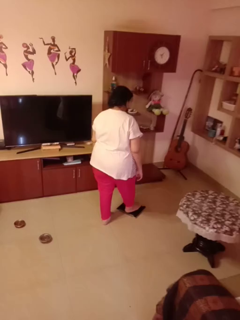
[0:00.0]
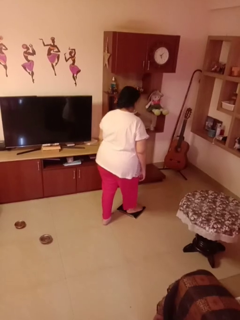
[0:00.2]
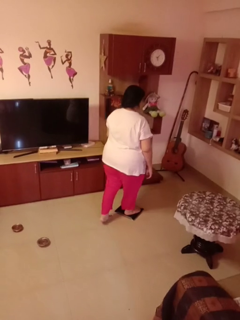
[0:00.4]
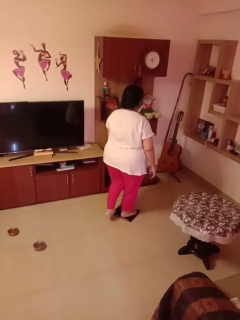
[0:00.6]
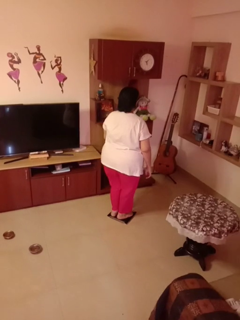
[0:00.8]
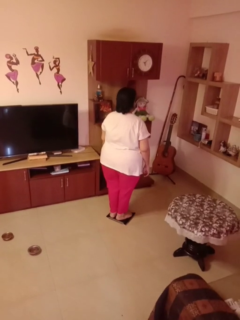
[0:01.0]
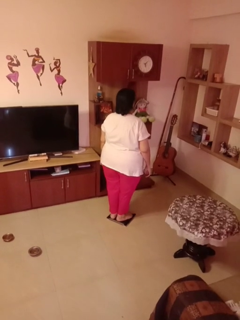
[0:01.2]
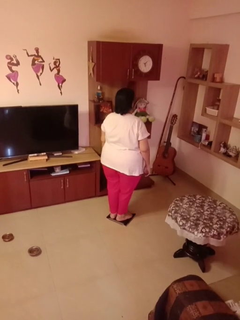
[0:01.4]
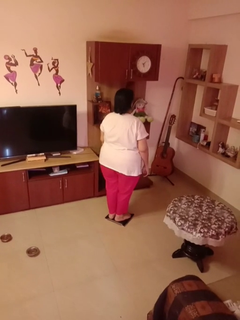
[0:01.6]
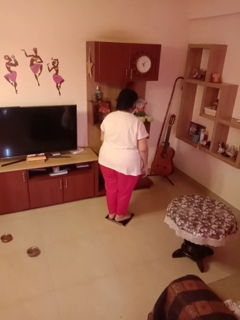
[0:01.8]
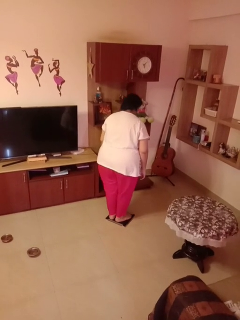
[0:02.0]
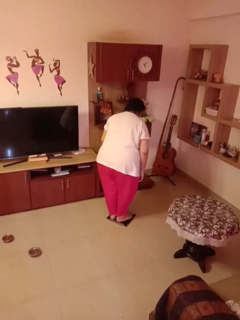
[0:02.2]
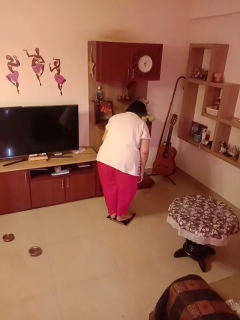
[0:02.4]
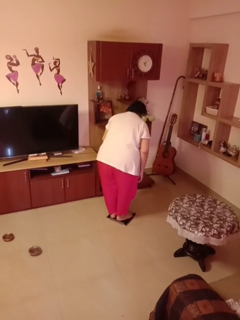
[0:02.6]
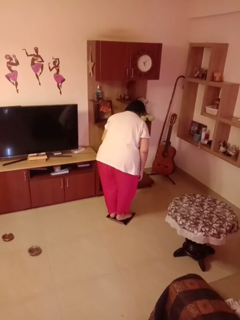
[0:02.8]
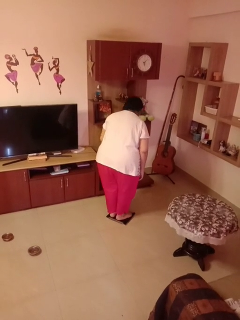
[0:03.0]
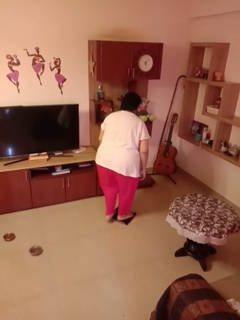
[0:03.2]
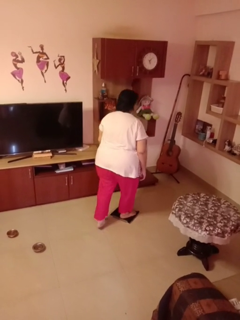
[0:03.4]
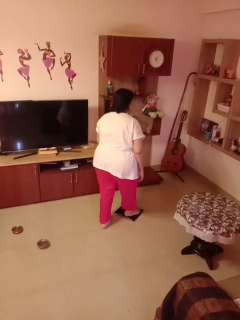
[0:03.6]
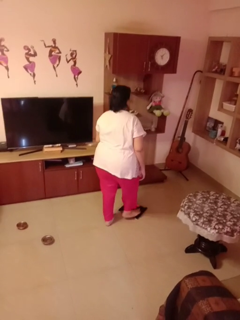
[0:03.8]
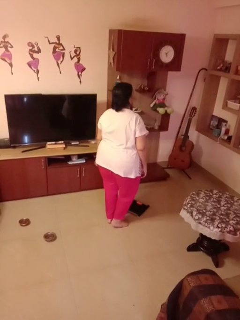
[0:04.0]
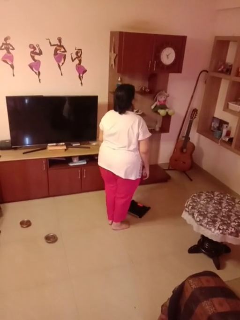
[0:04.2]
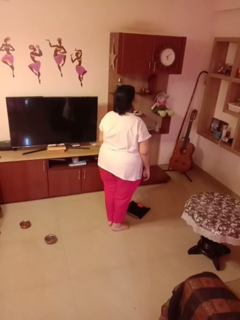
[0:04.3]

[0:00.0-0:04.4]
person uses bodyweight scale

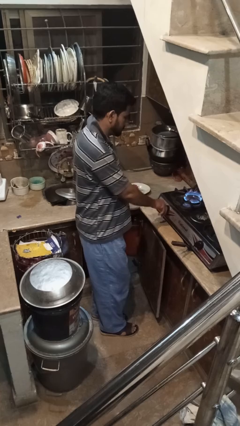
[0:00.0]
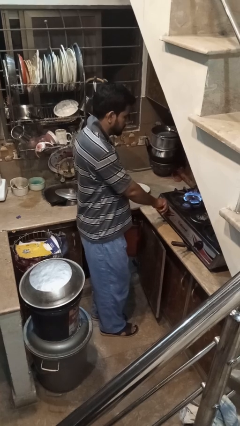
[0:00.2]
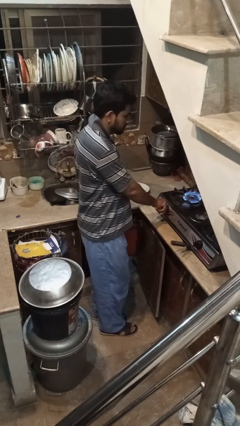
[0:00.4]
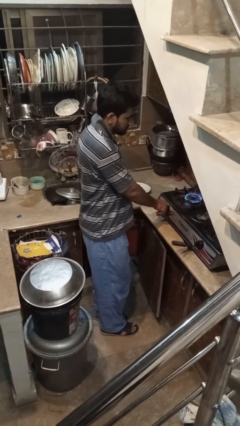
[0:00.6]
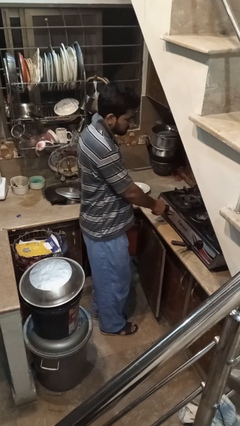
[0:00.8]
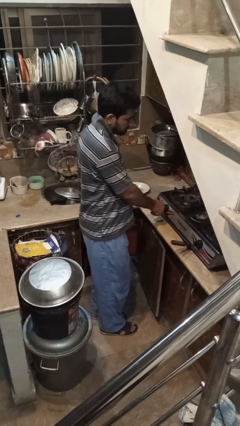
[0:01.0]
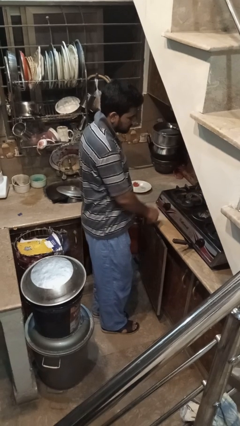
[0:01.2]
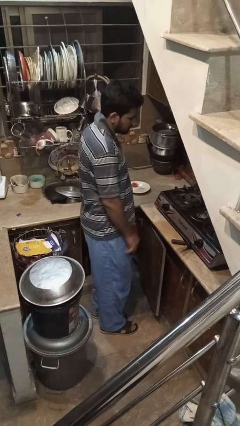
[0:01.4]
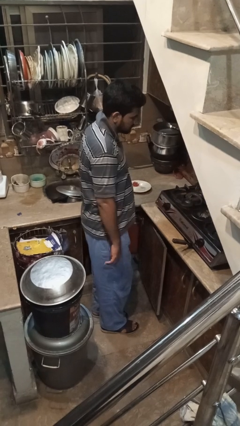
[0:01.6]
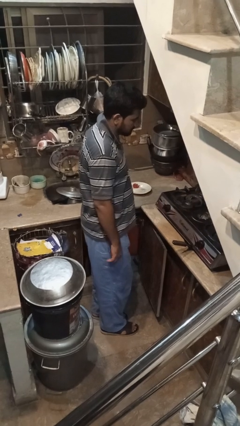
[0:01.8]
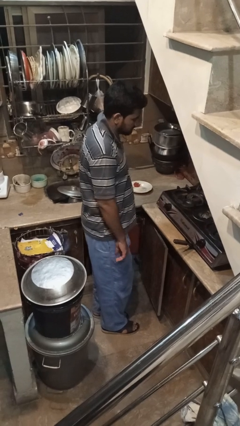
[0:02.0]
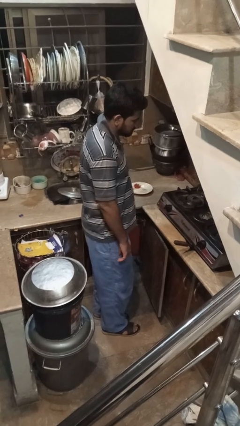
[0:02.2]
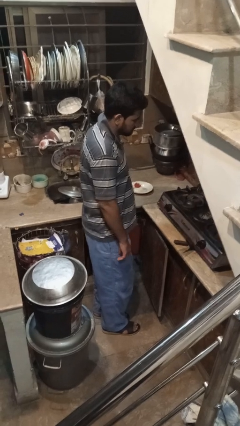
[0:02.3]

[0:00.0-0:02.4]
person turns off stovetop

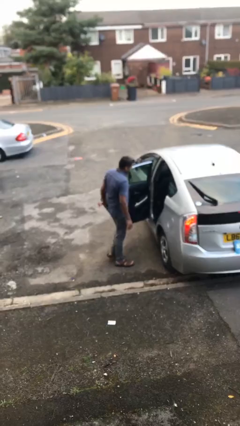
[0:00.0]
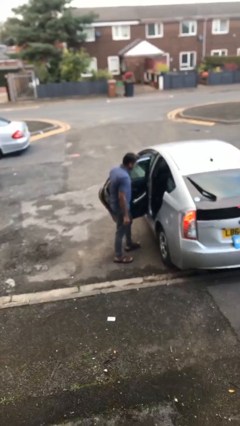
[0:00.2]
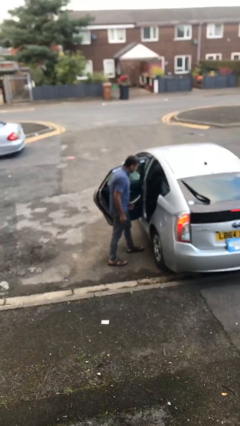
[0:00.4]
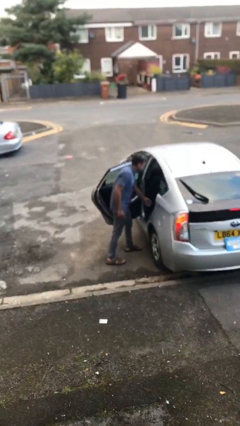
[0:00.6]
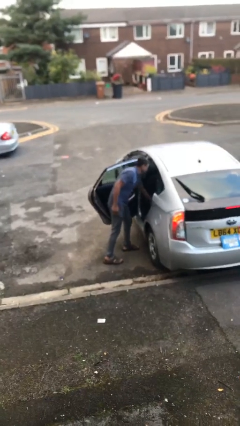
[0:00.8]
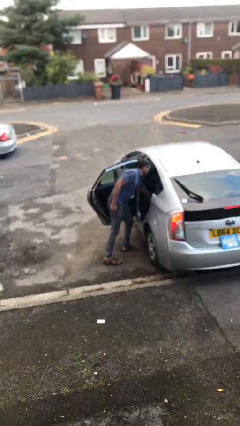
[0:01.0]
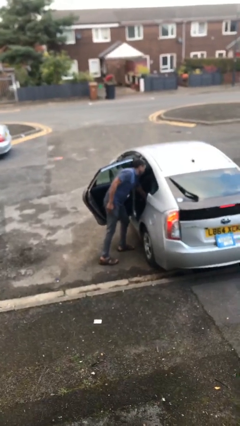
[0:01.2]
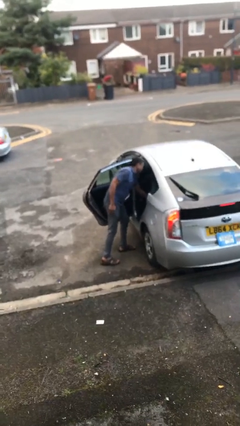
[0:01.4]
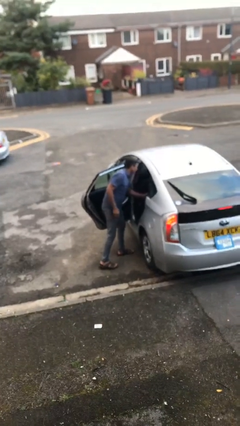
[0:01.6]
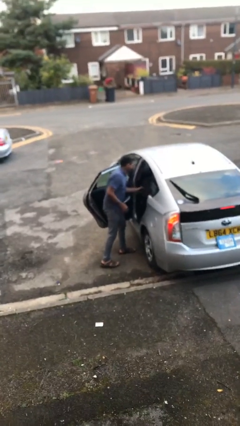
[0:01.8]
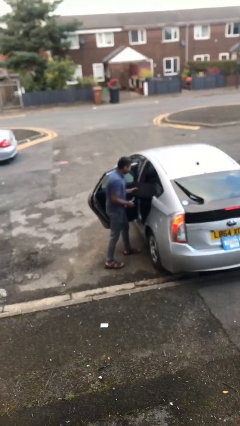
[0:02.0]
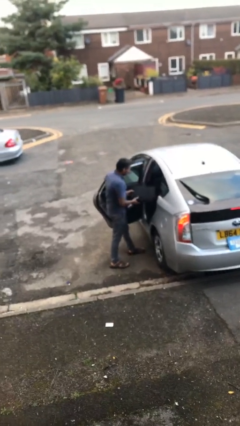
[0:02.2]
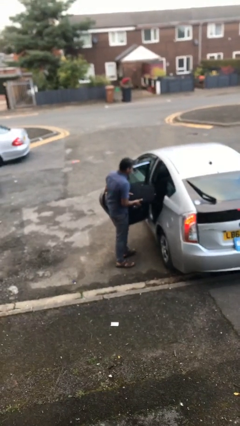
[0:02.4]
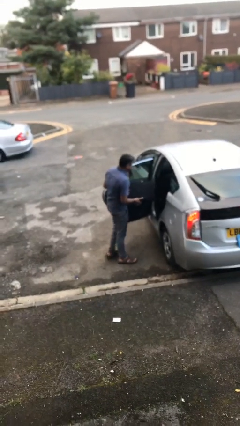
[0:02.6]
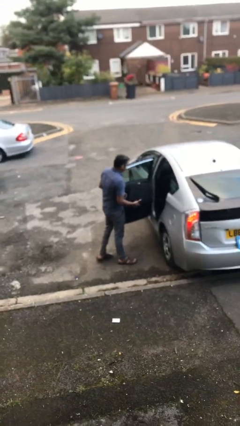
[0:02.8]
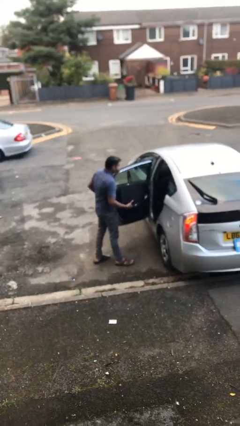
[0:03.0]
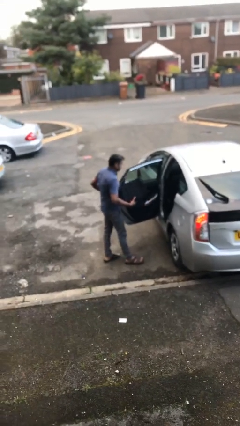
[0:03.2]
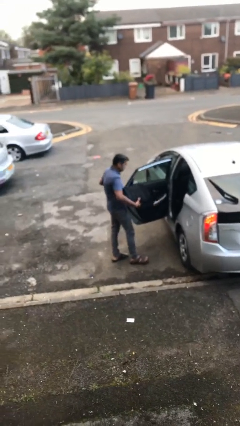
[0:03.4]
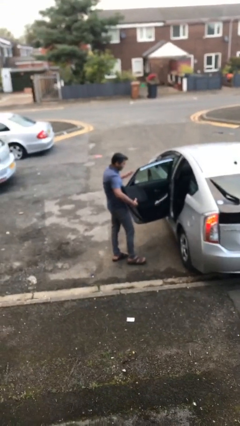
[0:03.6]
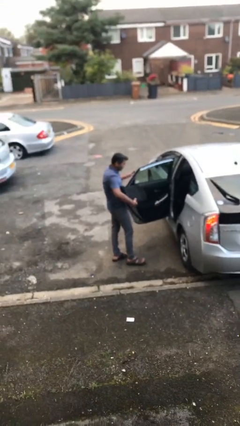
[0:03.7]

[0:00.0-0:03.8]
person unloads car

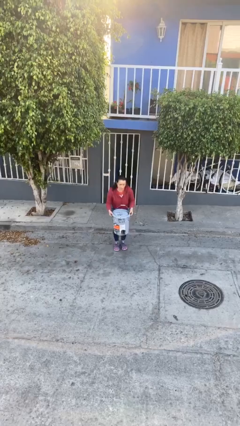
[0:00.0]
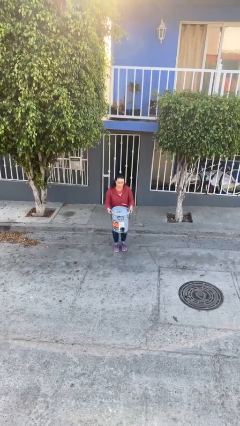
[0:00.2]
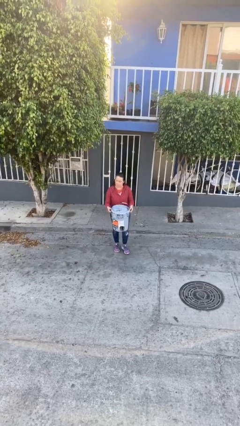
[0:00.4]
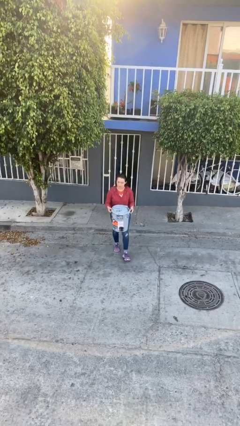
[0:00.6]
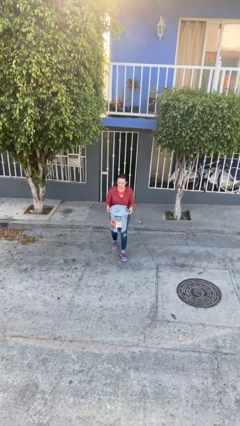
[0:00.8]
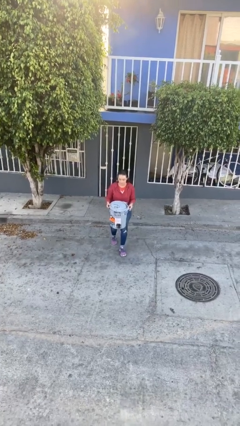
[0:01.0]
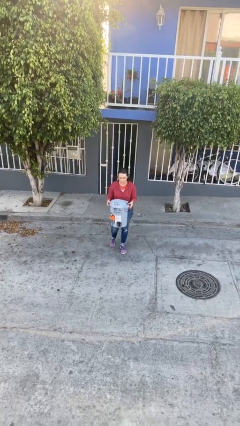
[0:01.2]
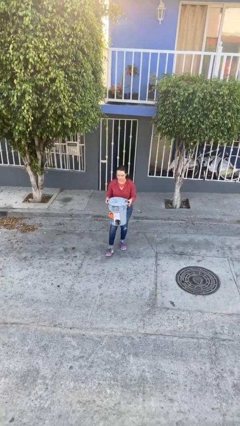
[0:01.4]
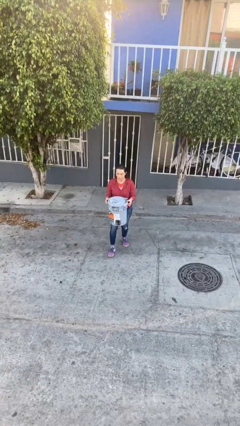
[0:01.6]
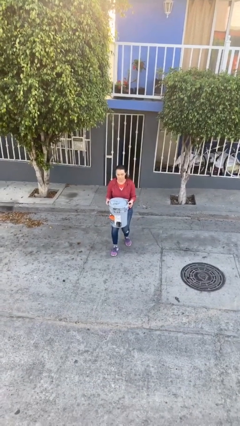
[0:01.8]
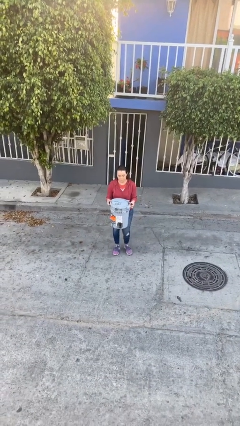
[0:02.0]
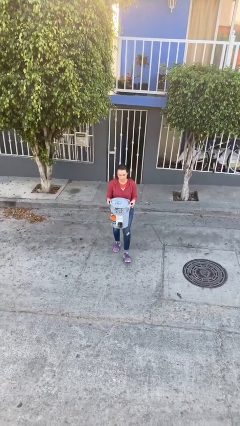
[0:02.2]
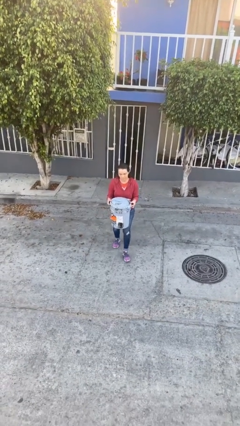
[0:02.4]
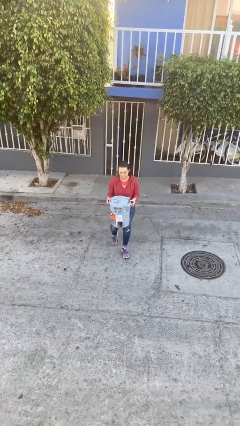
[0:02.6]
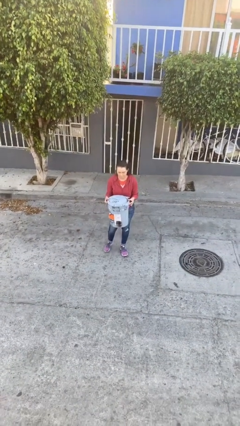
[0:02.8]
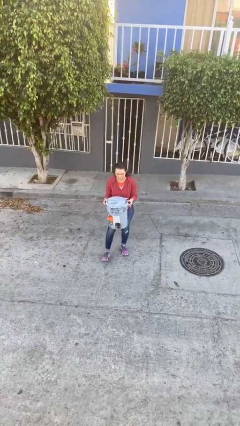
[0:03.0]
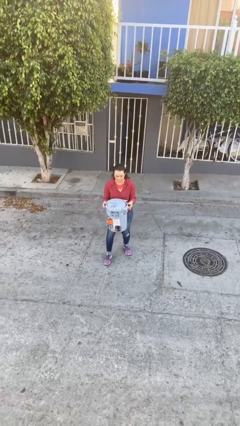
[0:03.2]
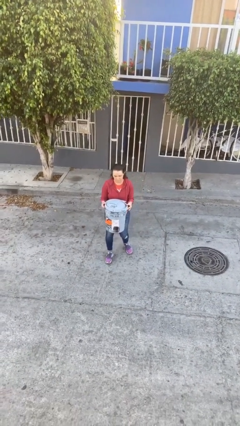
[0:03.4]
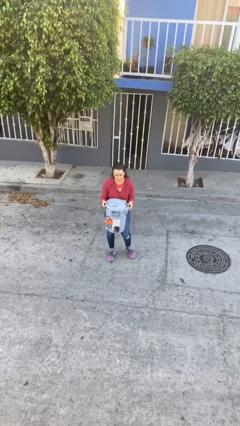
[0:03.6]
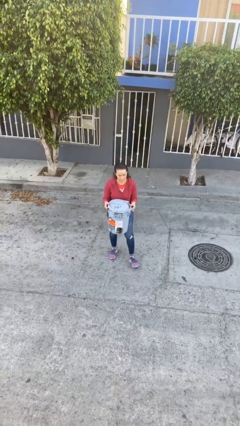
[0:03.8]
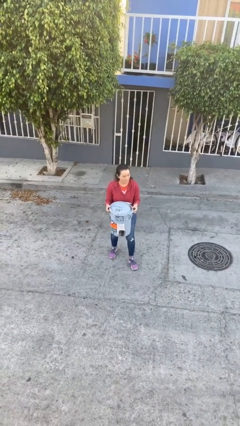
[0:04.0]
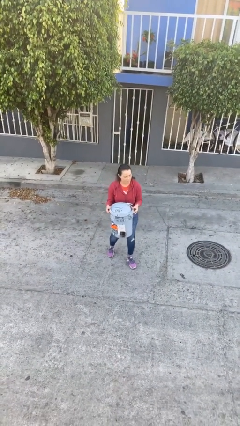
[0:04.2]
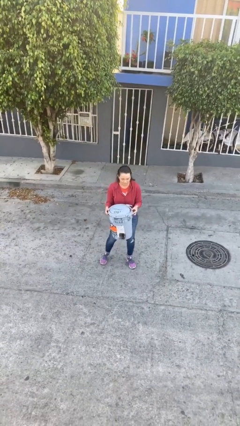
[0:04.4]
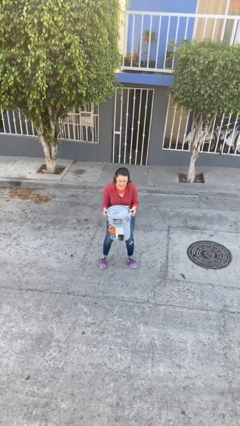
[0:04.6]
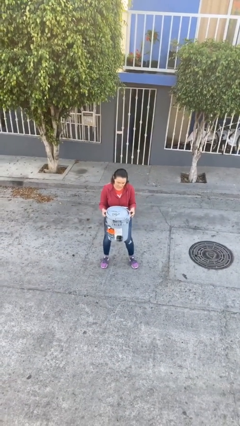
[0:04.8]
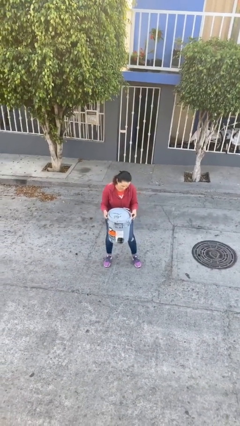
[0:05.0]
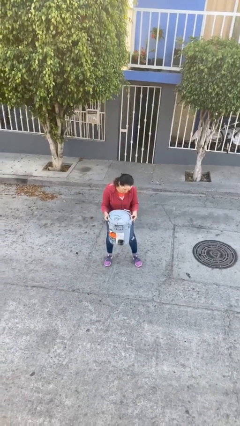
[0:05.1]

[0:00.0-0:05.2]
person carries heavy object

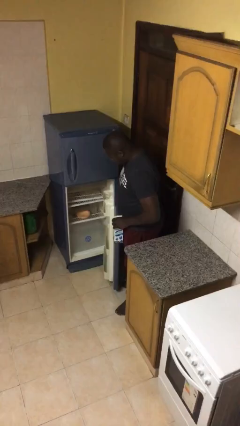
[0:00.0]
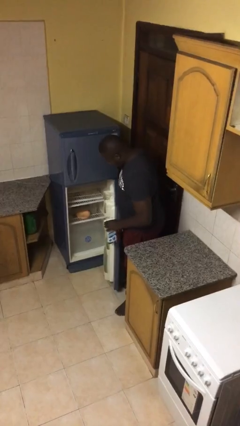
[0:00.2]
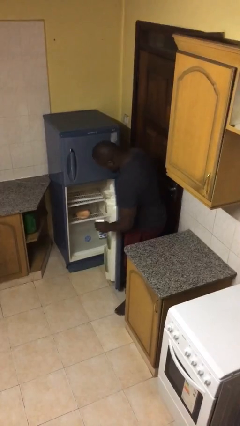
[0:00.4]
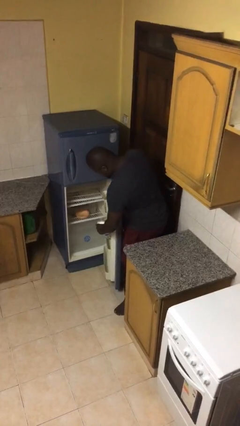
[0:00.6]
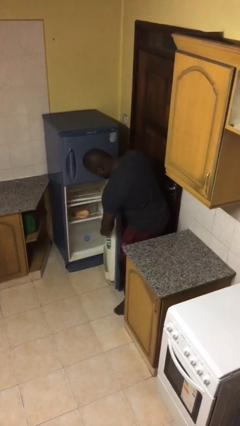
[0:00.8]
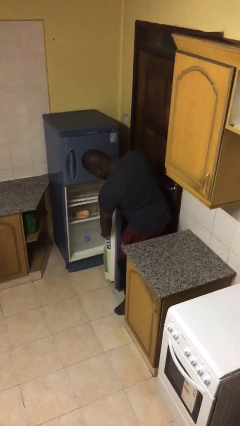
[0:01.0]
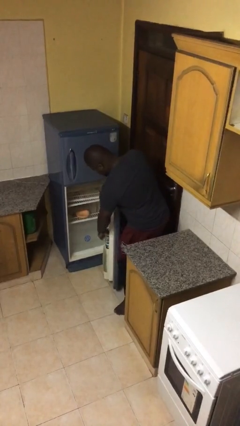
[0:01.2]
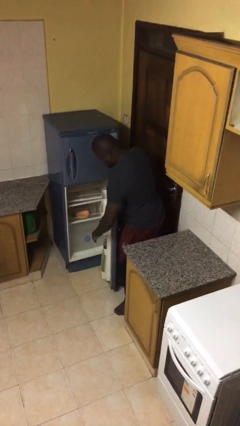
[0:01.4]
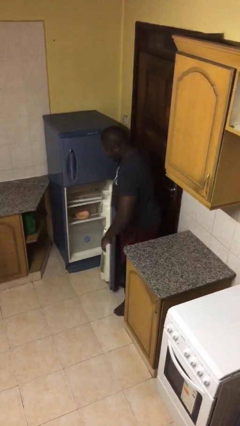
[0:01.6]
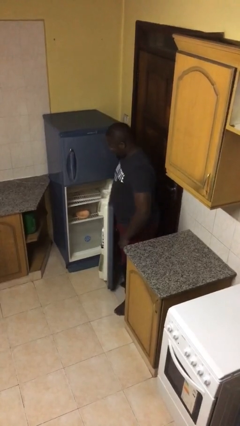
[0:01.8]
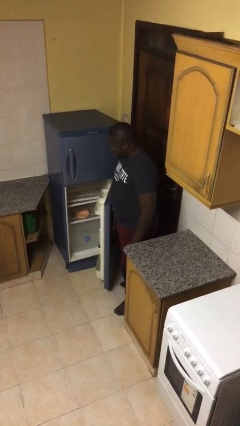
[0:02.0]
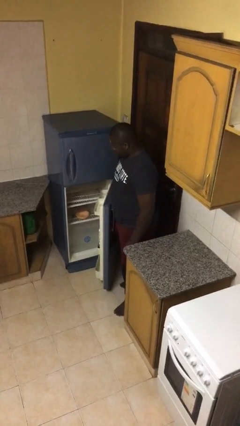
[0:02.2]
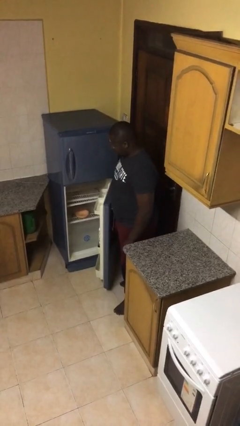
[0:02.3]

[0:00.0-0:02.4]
person puts object into refrigerator

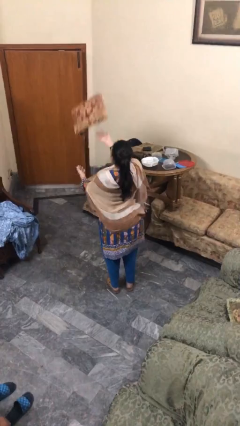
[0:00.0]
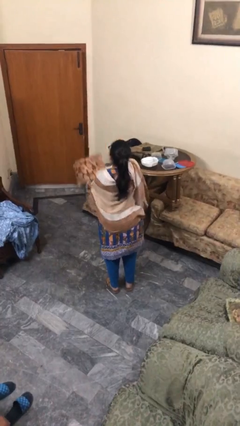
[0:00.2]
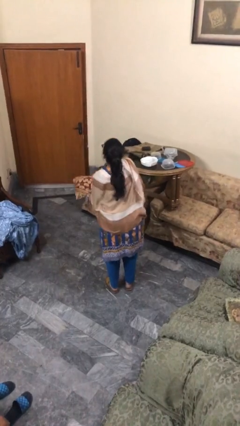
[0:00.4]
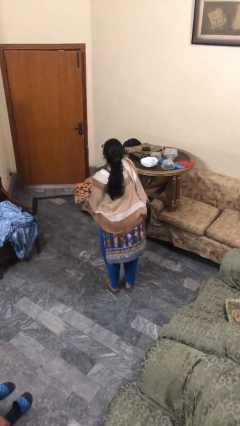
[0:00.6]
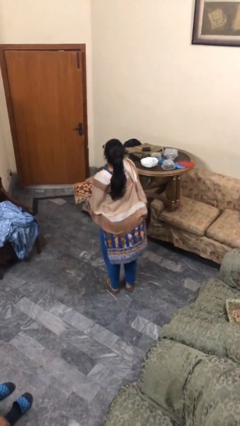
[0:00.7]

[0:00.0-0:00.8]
person catches dropped object
